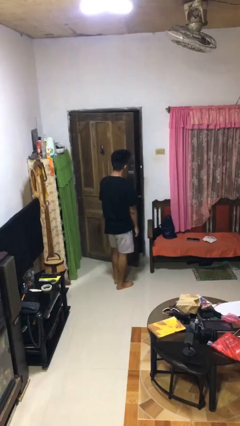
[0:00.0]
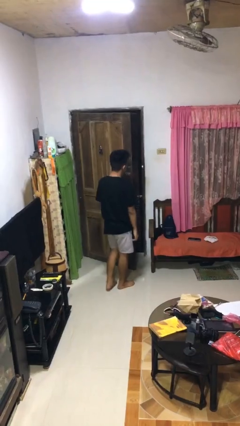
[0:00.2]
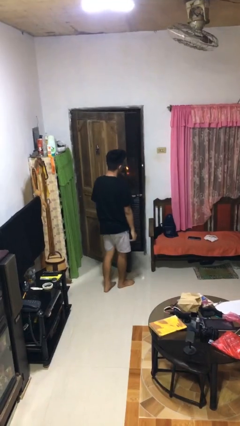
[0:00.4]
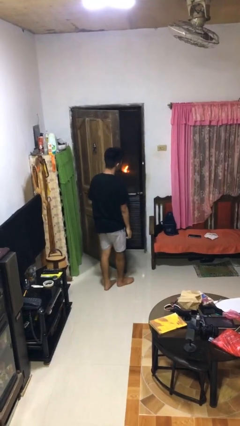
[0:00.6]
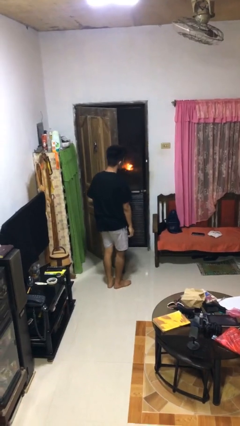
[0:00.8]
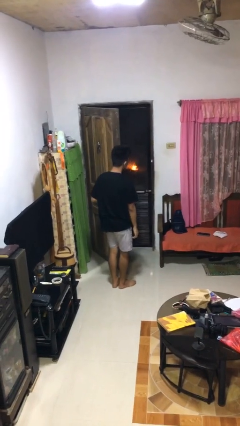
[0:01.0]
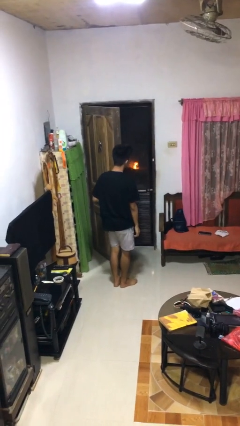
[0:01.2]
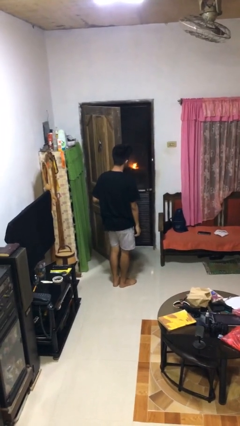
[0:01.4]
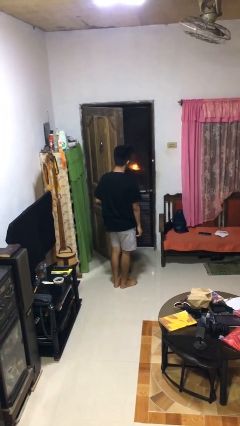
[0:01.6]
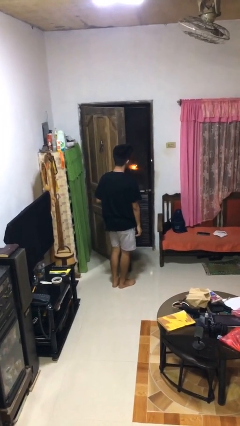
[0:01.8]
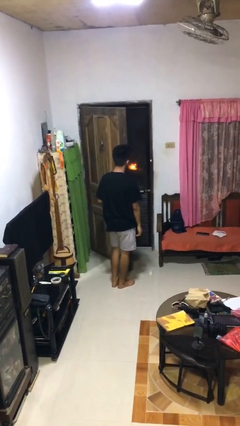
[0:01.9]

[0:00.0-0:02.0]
person opens facility door

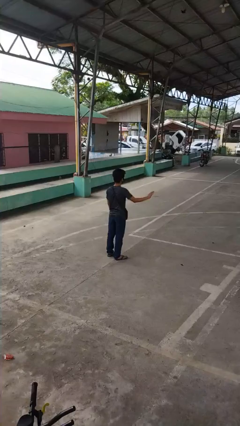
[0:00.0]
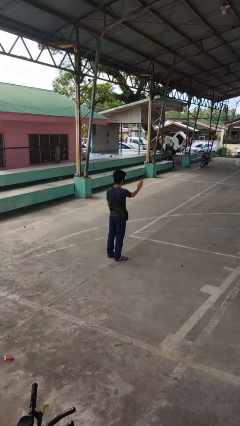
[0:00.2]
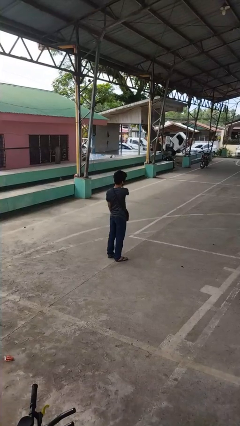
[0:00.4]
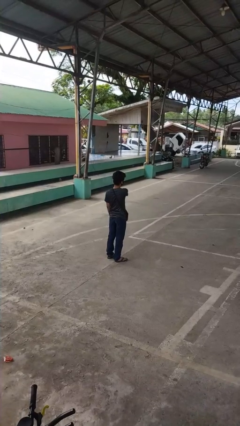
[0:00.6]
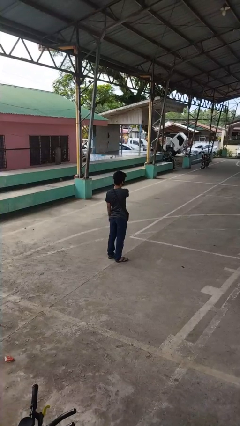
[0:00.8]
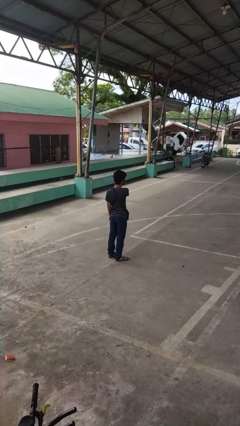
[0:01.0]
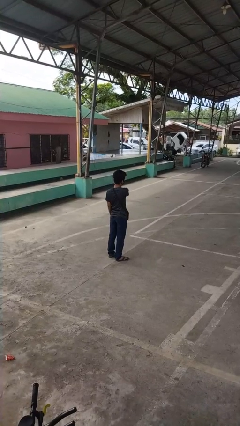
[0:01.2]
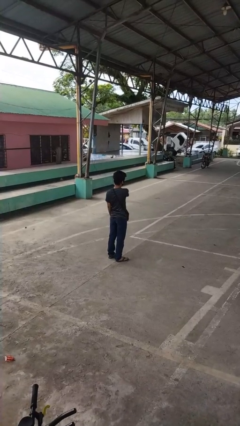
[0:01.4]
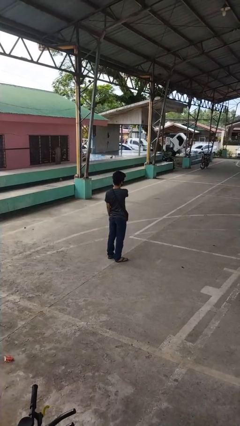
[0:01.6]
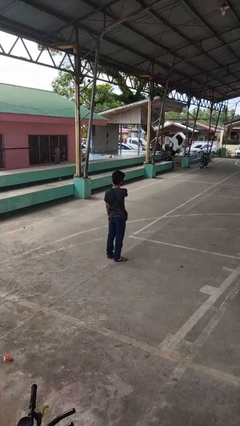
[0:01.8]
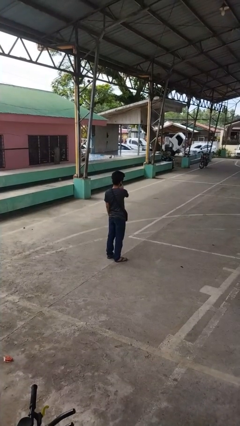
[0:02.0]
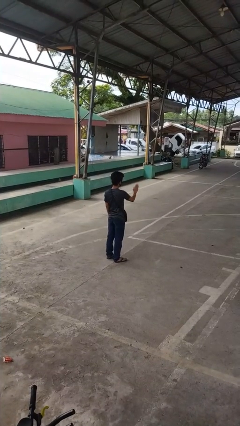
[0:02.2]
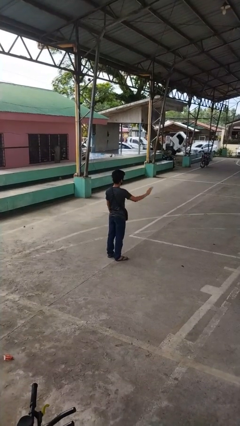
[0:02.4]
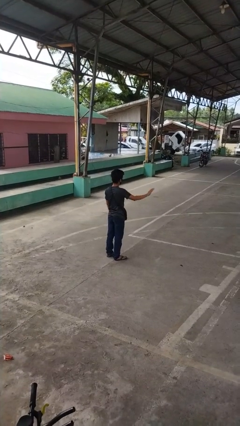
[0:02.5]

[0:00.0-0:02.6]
person gestures swipe left

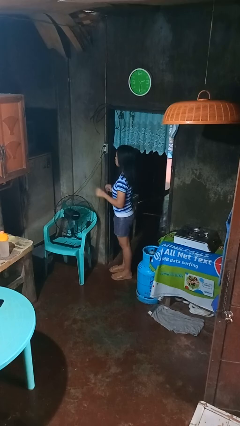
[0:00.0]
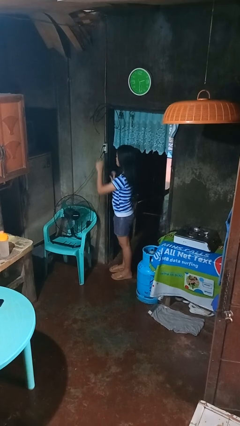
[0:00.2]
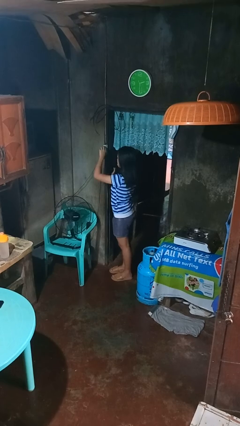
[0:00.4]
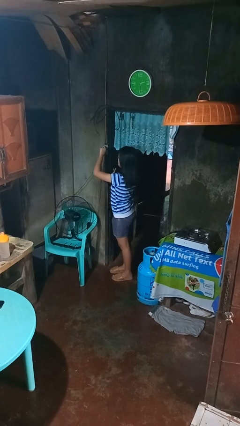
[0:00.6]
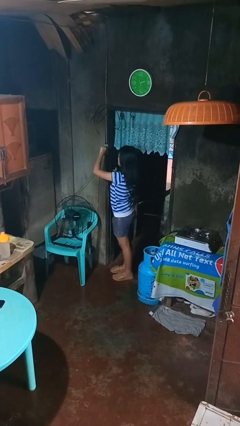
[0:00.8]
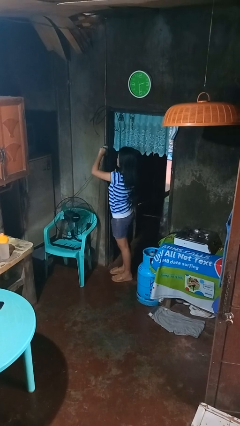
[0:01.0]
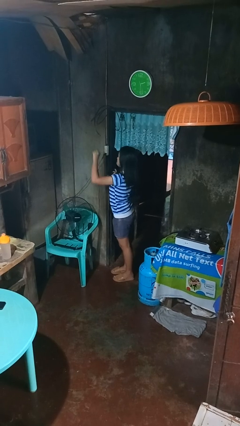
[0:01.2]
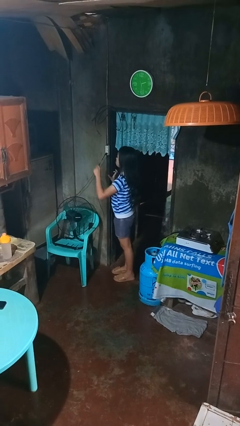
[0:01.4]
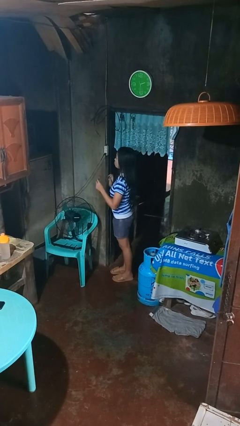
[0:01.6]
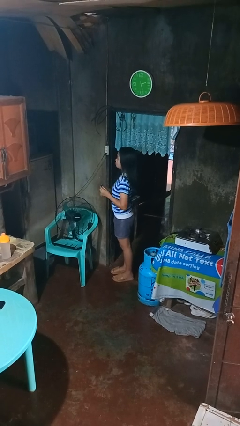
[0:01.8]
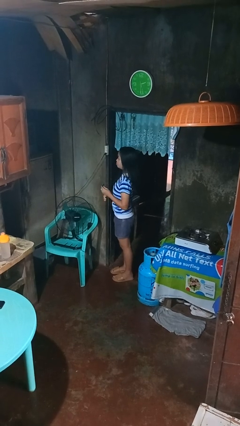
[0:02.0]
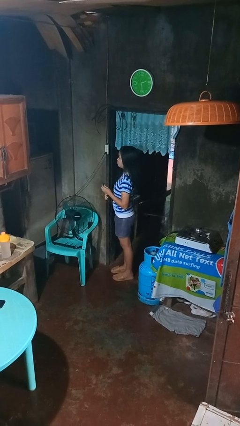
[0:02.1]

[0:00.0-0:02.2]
person unplugs from electrical socket

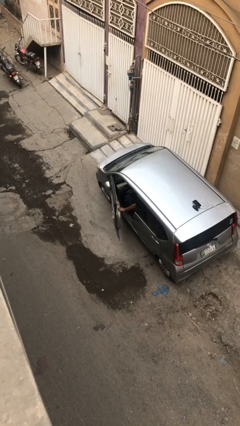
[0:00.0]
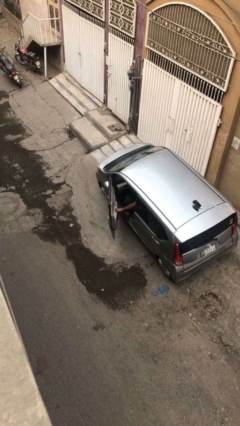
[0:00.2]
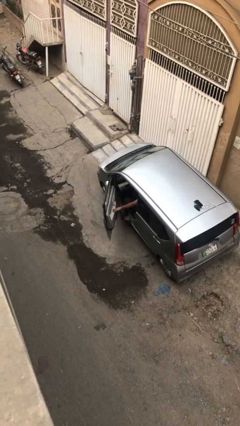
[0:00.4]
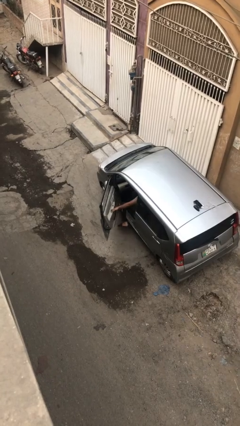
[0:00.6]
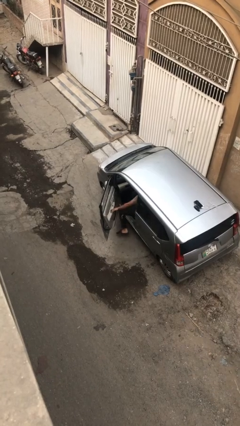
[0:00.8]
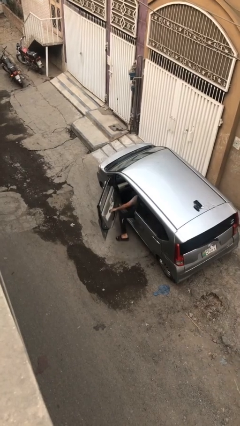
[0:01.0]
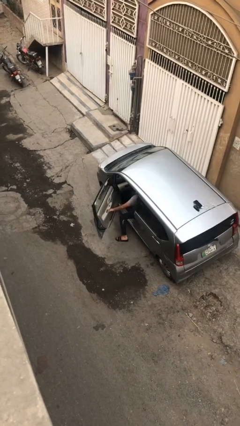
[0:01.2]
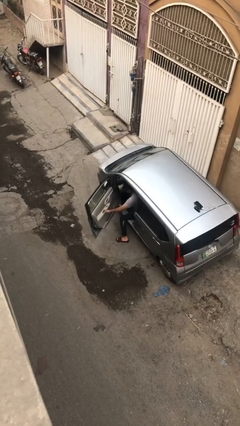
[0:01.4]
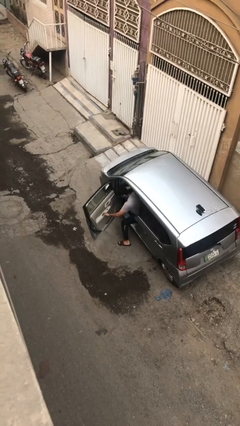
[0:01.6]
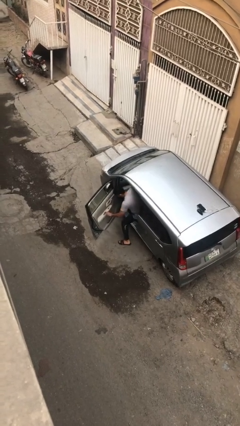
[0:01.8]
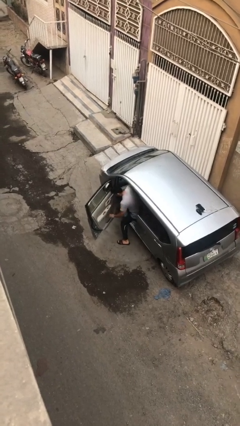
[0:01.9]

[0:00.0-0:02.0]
person opens car door

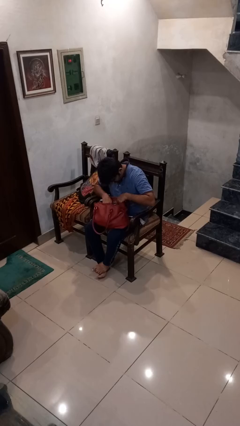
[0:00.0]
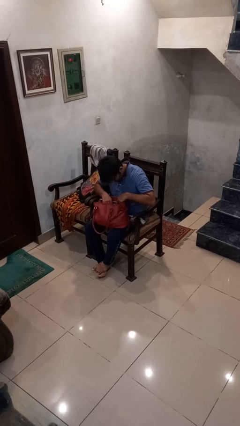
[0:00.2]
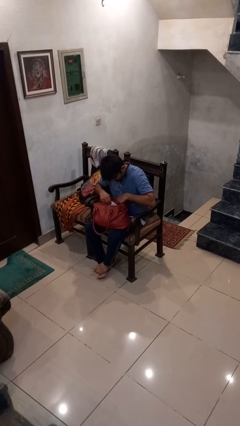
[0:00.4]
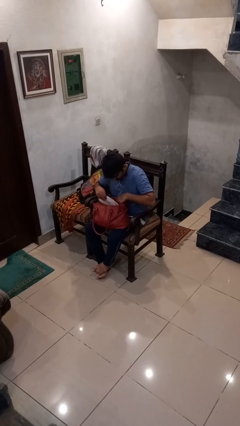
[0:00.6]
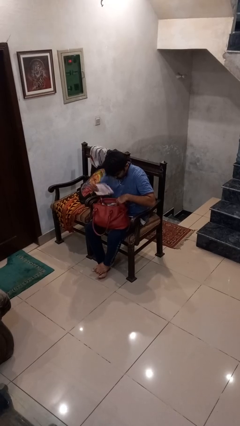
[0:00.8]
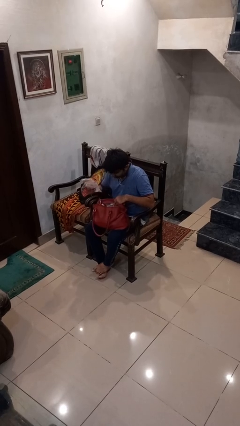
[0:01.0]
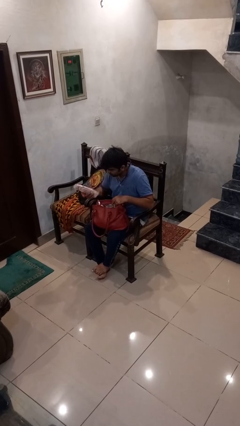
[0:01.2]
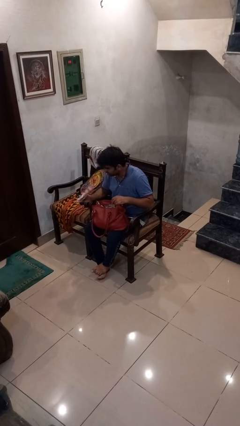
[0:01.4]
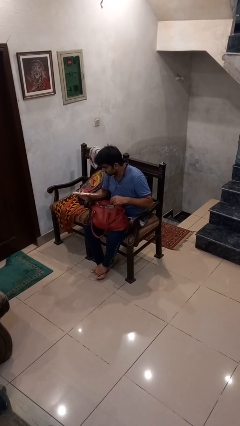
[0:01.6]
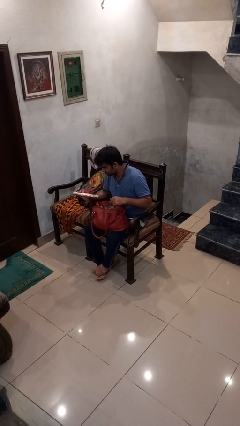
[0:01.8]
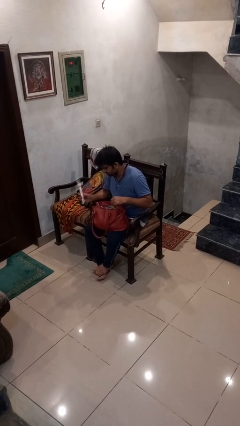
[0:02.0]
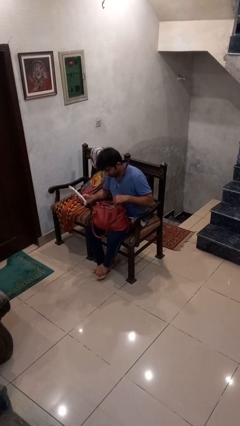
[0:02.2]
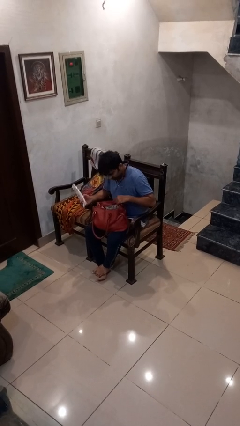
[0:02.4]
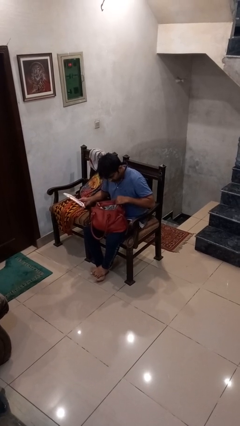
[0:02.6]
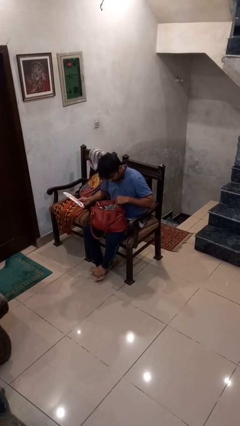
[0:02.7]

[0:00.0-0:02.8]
person takes object from purse

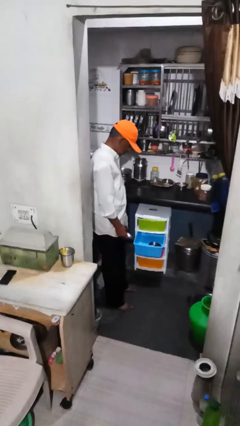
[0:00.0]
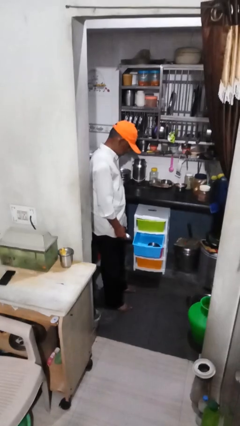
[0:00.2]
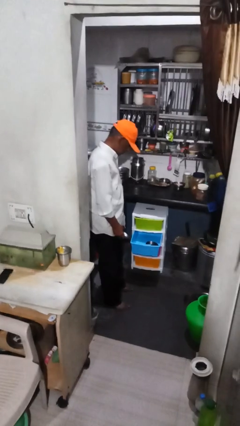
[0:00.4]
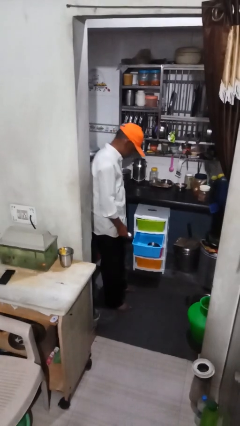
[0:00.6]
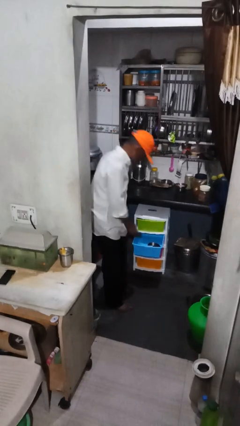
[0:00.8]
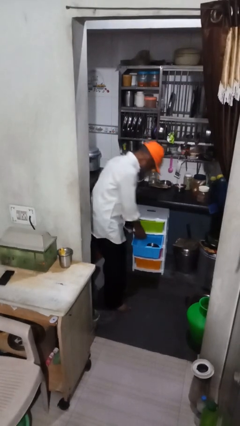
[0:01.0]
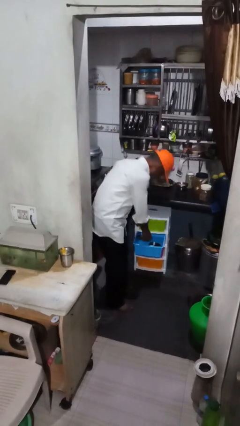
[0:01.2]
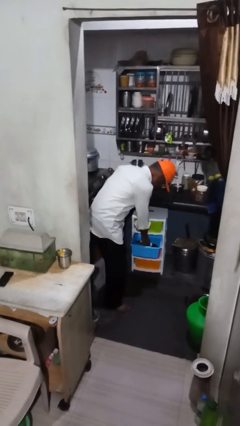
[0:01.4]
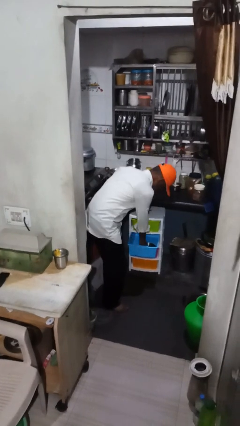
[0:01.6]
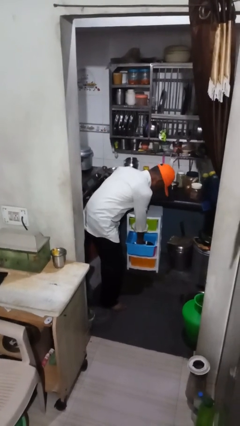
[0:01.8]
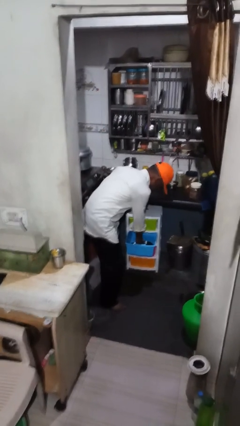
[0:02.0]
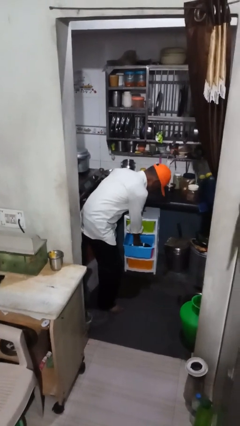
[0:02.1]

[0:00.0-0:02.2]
person puts object in cabinet

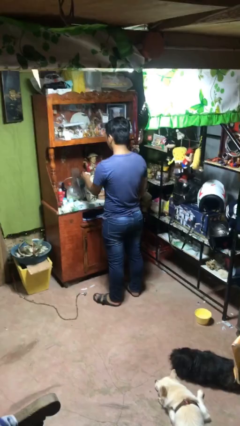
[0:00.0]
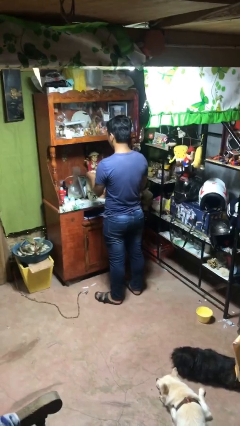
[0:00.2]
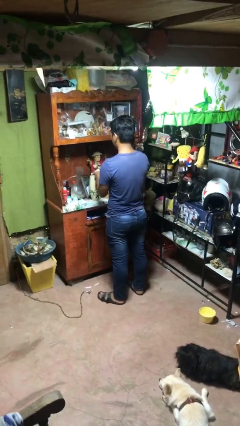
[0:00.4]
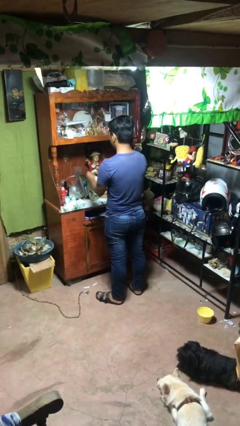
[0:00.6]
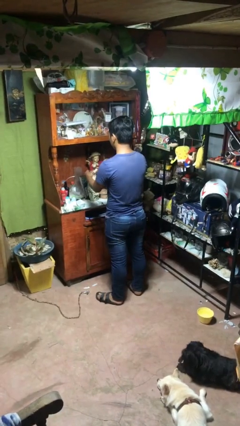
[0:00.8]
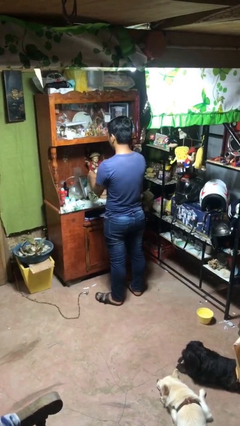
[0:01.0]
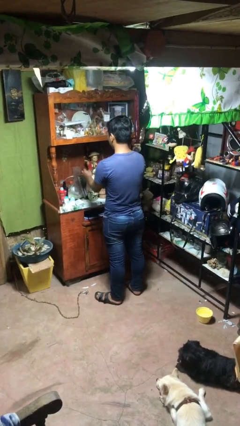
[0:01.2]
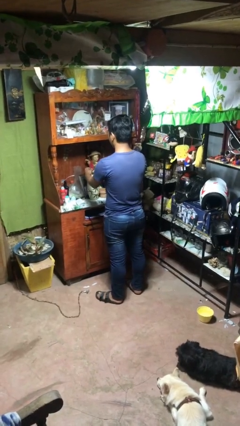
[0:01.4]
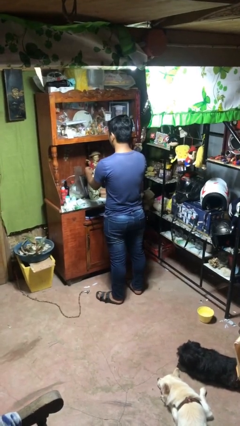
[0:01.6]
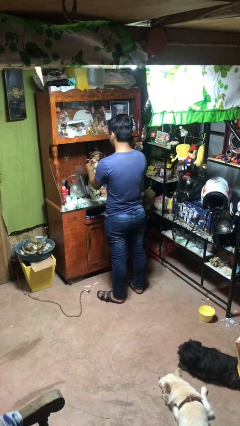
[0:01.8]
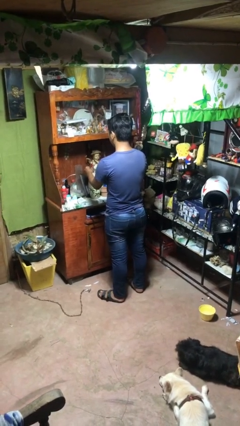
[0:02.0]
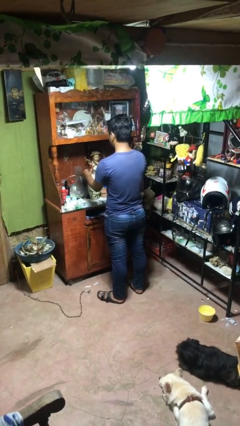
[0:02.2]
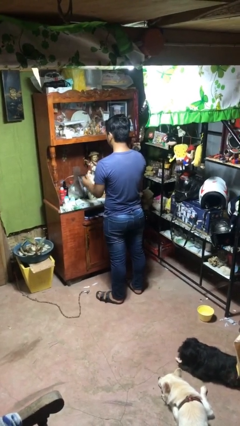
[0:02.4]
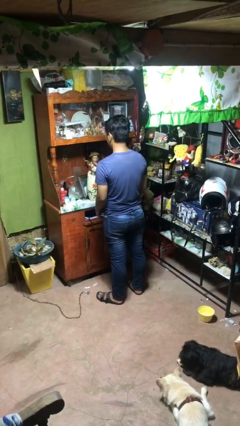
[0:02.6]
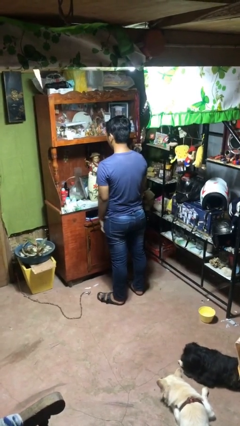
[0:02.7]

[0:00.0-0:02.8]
person arranges flowers in vase
